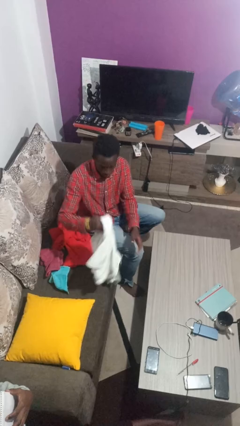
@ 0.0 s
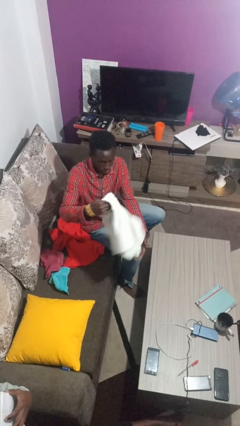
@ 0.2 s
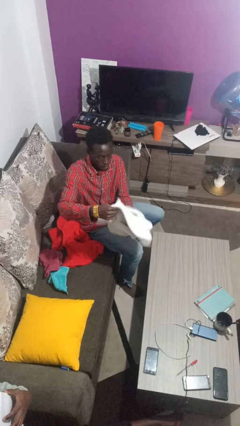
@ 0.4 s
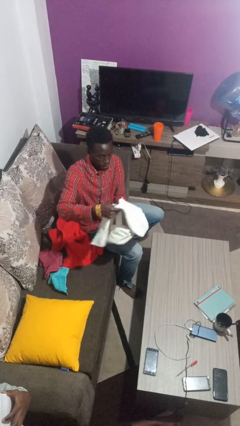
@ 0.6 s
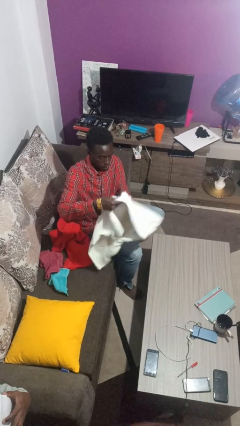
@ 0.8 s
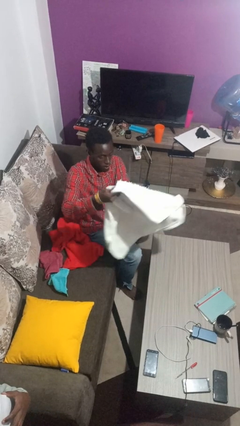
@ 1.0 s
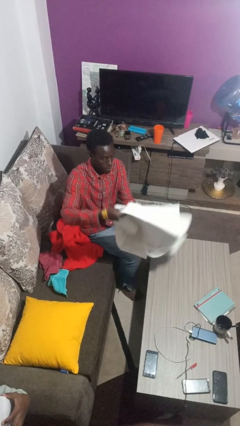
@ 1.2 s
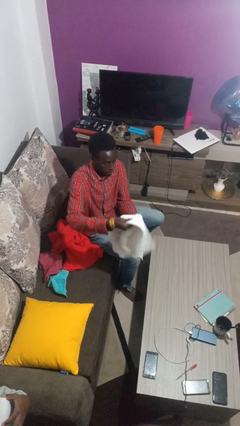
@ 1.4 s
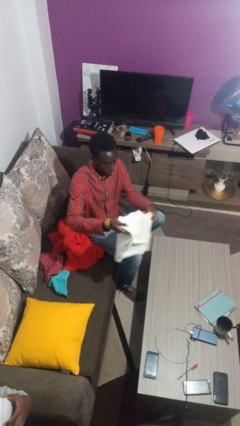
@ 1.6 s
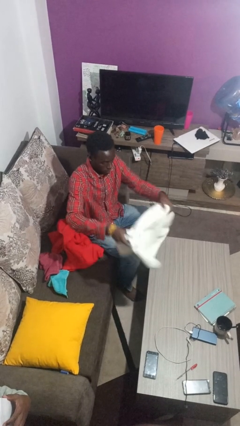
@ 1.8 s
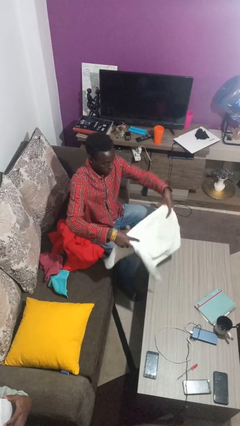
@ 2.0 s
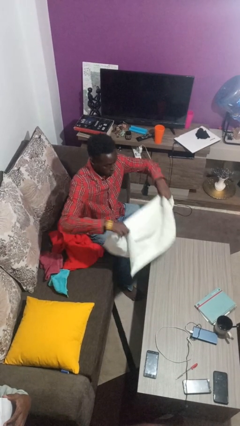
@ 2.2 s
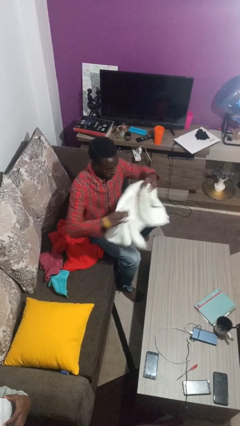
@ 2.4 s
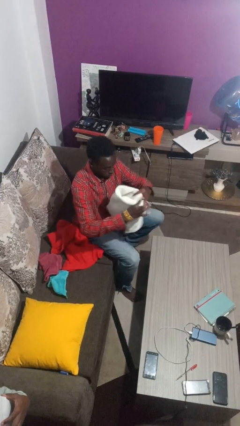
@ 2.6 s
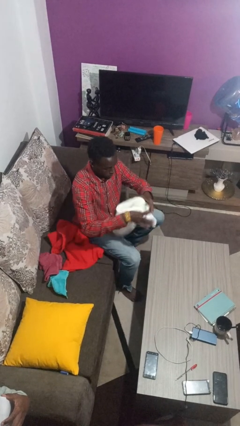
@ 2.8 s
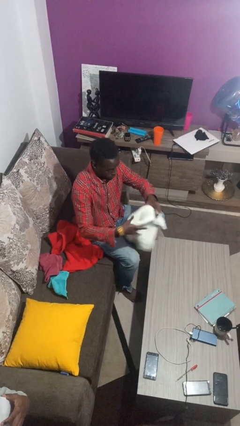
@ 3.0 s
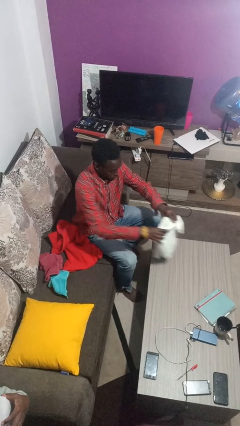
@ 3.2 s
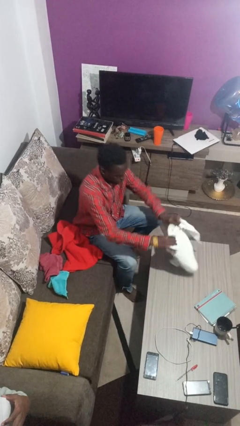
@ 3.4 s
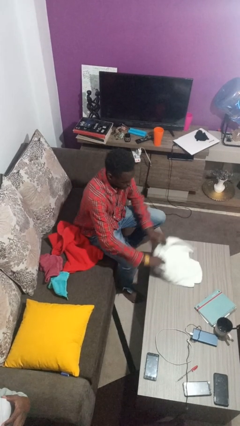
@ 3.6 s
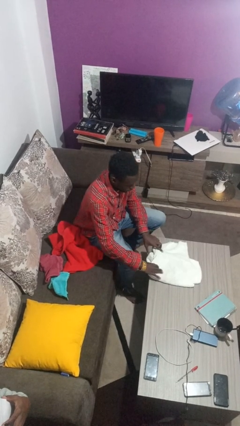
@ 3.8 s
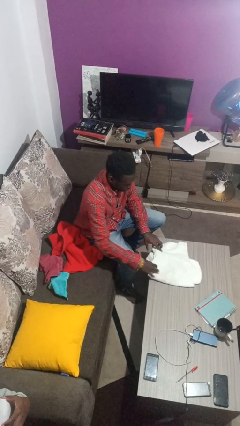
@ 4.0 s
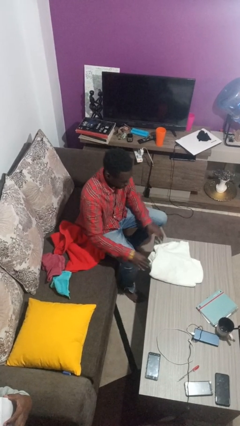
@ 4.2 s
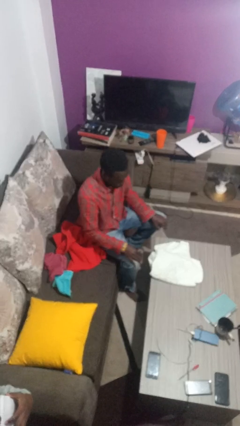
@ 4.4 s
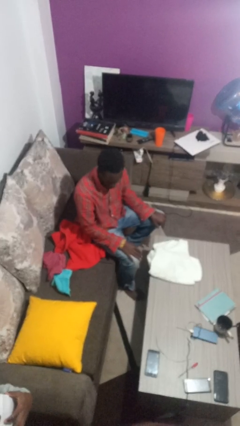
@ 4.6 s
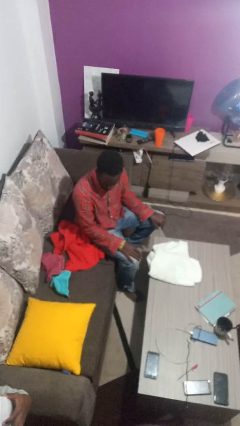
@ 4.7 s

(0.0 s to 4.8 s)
person folds towel

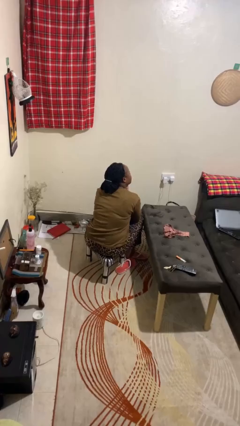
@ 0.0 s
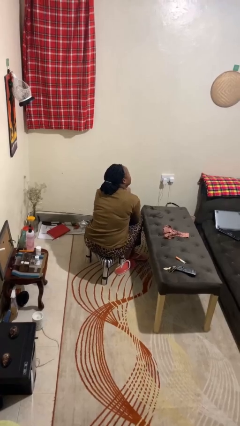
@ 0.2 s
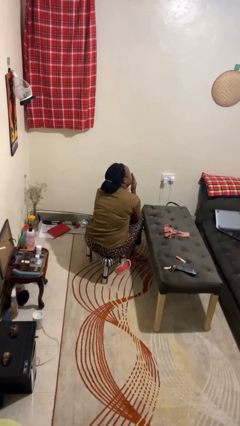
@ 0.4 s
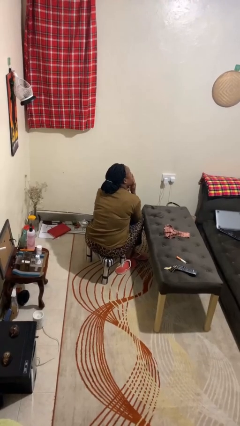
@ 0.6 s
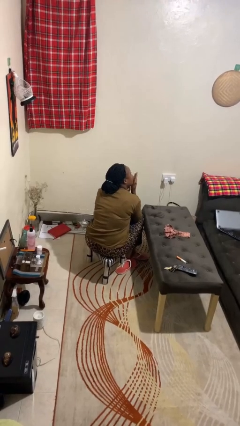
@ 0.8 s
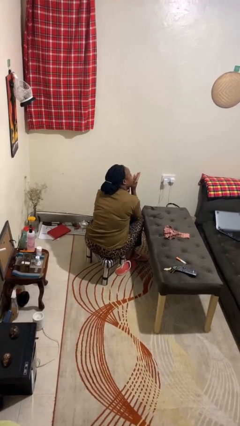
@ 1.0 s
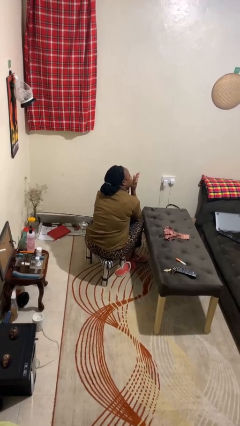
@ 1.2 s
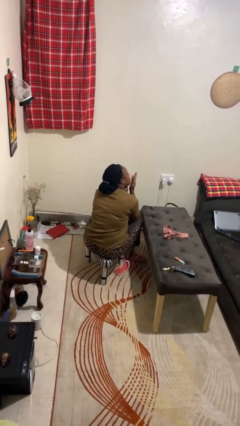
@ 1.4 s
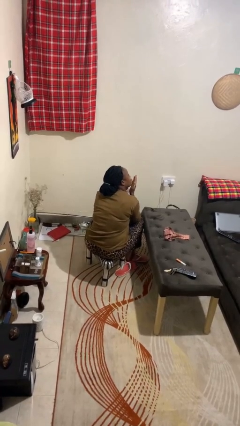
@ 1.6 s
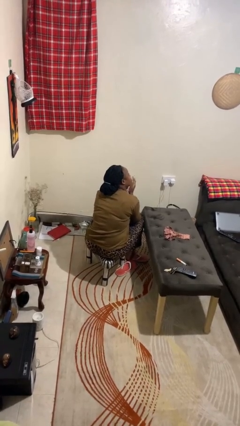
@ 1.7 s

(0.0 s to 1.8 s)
person gestures blow kiss

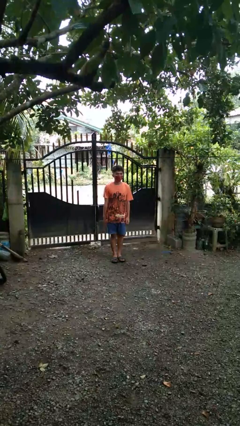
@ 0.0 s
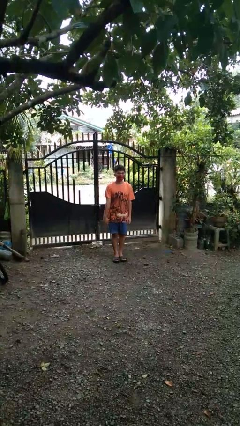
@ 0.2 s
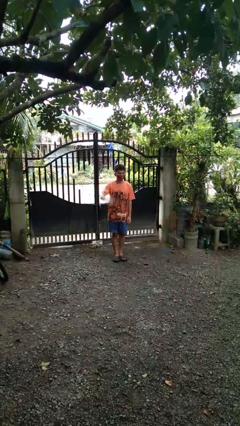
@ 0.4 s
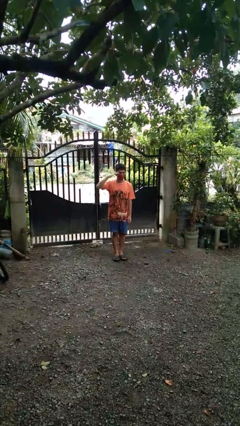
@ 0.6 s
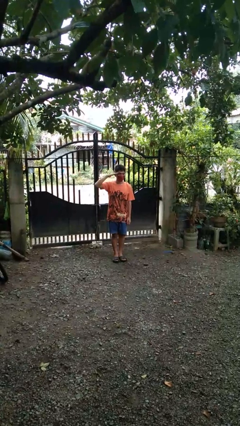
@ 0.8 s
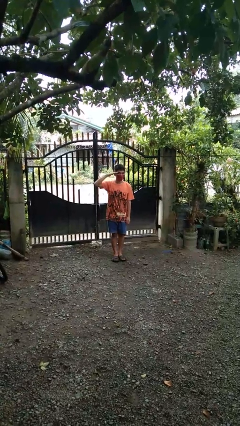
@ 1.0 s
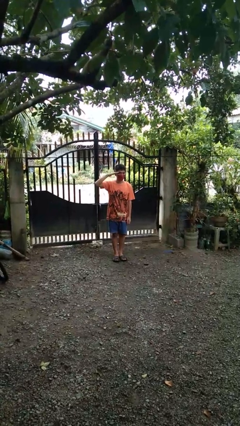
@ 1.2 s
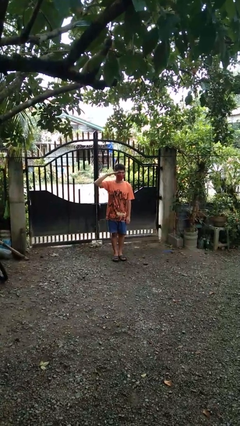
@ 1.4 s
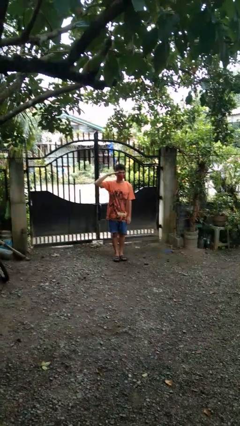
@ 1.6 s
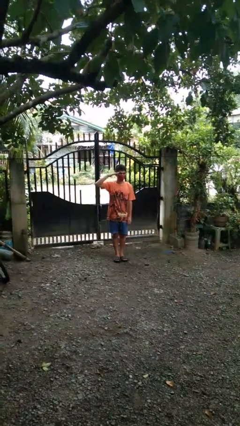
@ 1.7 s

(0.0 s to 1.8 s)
person salutes

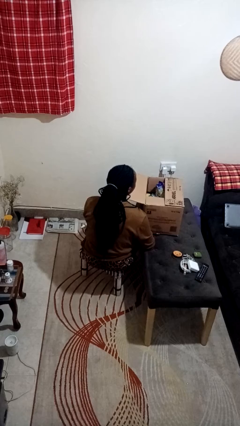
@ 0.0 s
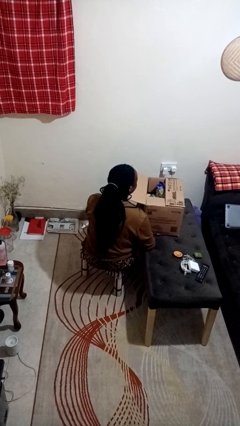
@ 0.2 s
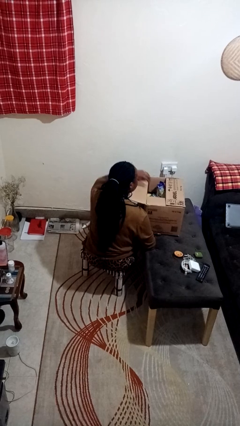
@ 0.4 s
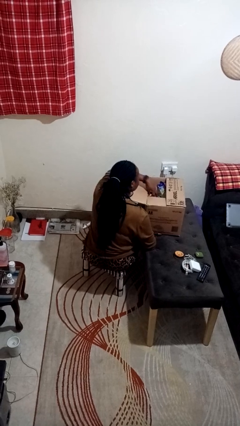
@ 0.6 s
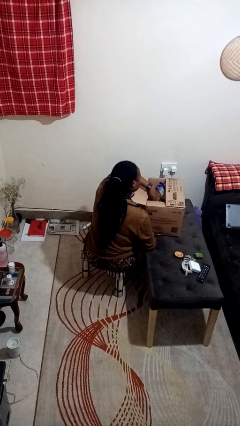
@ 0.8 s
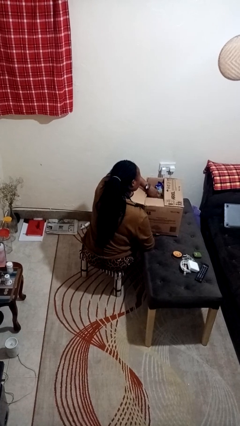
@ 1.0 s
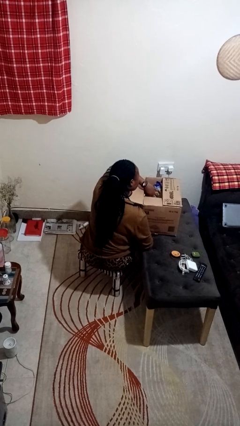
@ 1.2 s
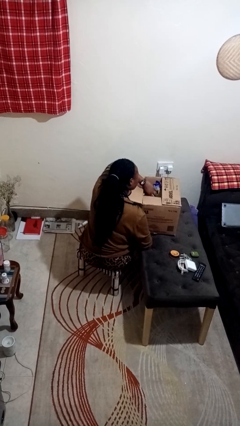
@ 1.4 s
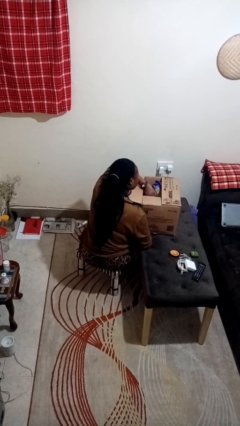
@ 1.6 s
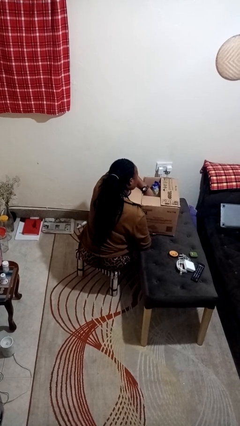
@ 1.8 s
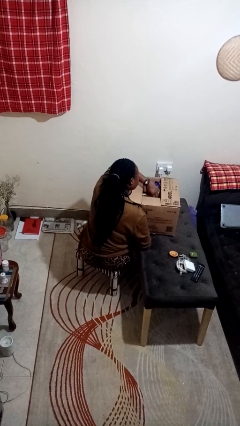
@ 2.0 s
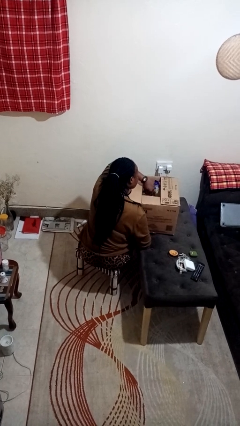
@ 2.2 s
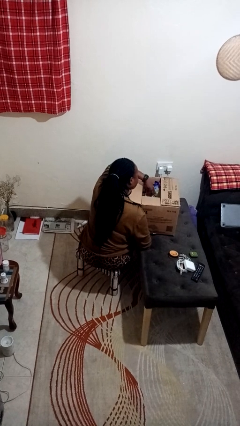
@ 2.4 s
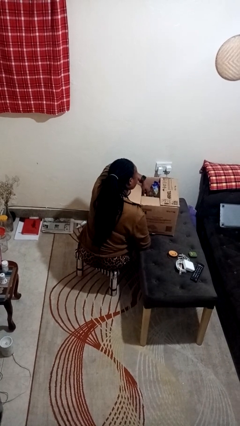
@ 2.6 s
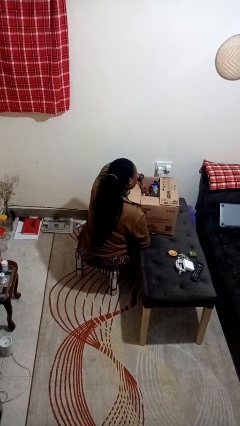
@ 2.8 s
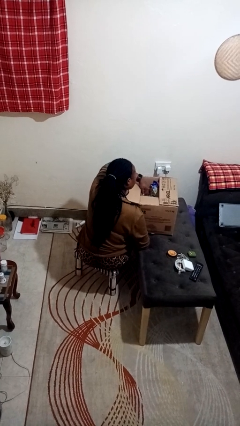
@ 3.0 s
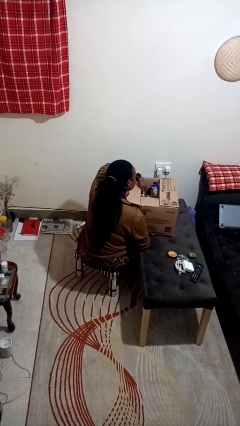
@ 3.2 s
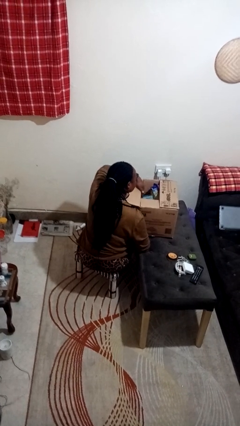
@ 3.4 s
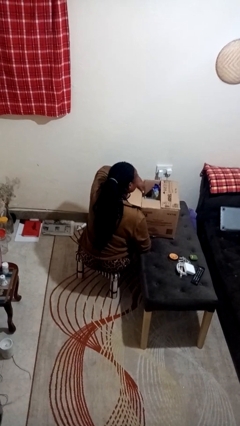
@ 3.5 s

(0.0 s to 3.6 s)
person searches in box

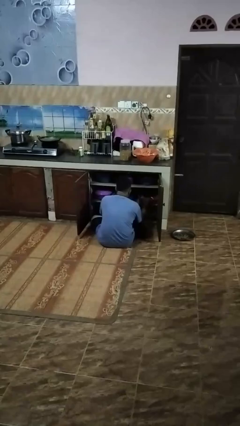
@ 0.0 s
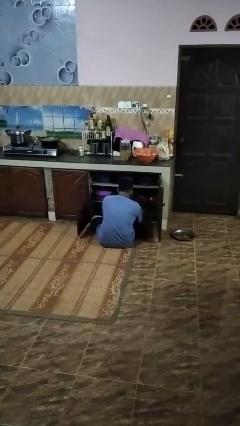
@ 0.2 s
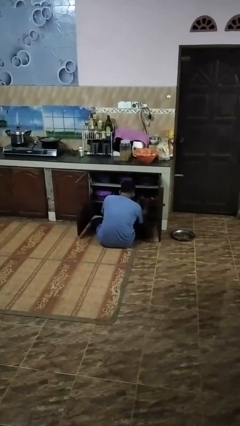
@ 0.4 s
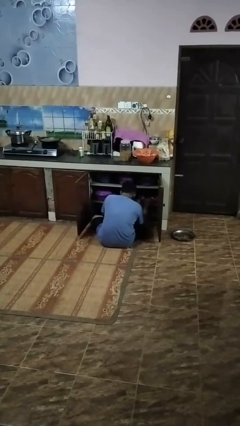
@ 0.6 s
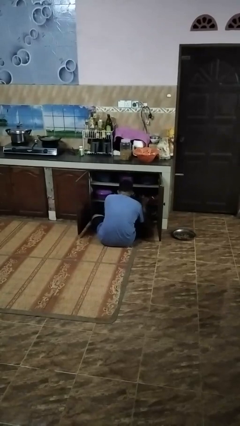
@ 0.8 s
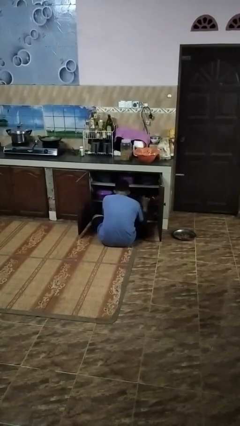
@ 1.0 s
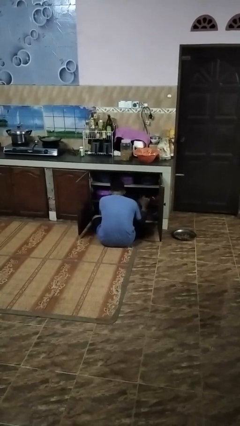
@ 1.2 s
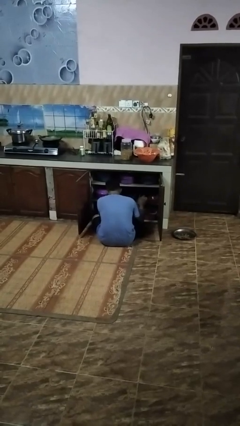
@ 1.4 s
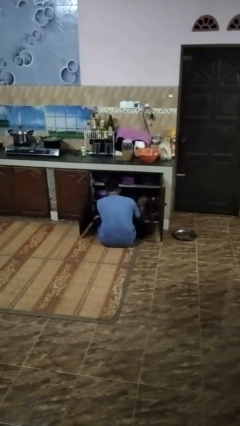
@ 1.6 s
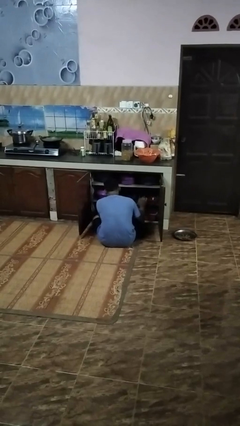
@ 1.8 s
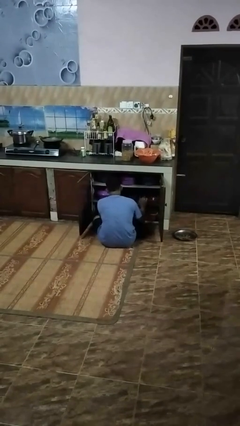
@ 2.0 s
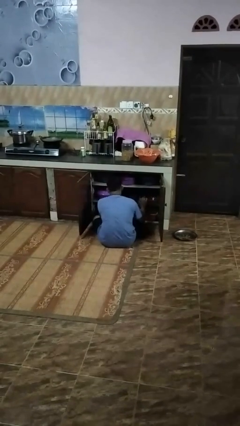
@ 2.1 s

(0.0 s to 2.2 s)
person searches in kitchen drawer

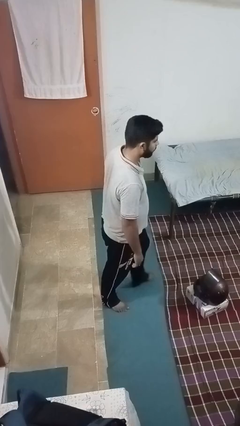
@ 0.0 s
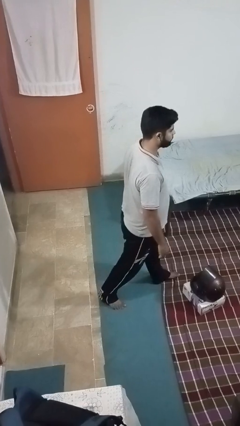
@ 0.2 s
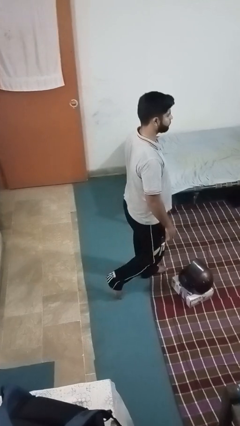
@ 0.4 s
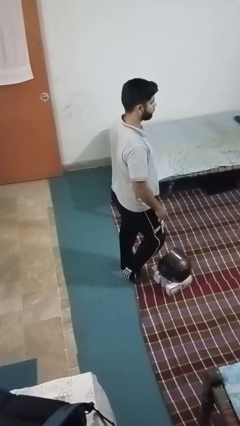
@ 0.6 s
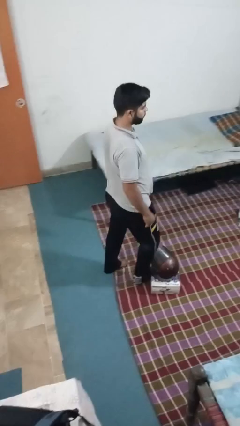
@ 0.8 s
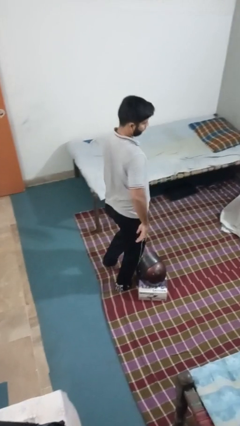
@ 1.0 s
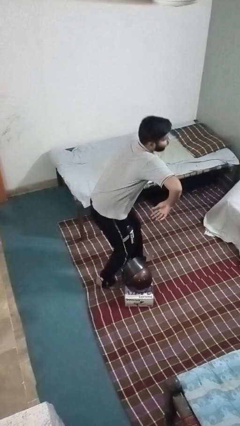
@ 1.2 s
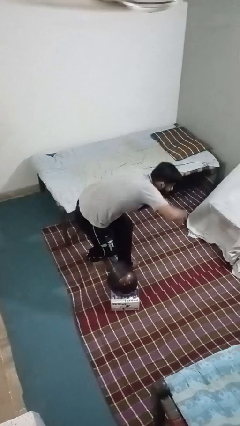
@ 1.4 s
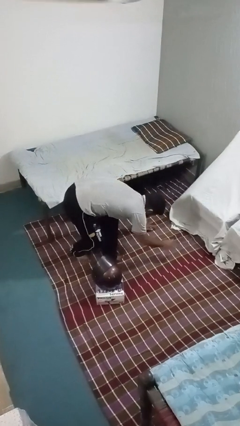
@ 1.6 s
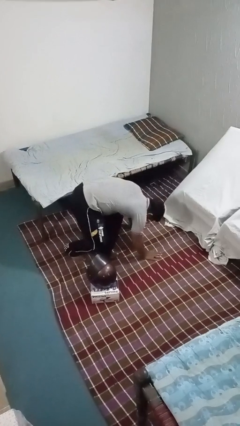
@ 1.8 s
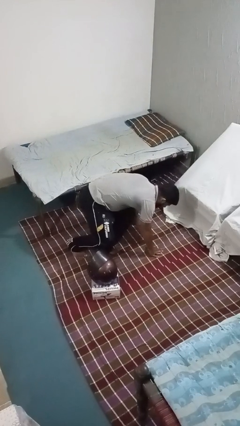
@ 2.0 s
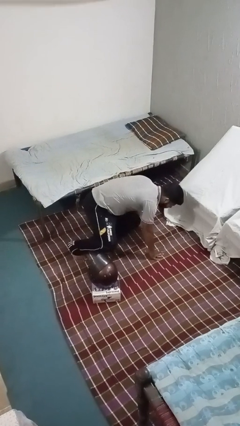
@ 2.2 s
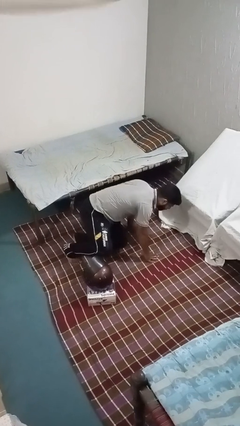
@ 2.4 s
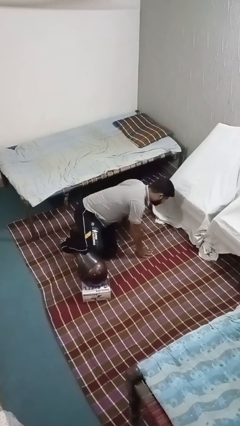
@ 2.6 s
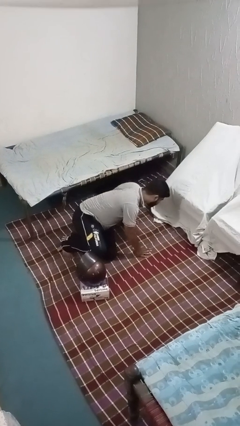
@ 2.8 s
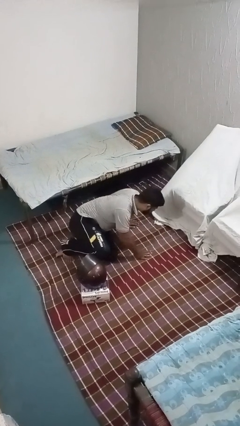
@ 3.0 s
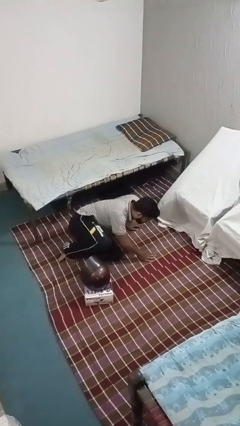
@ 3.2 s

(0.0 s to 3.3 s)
person trips on object on floor

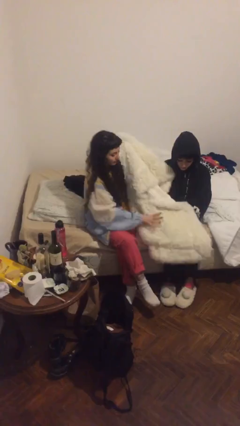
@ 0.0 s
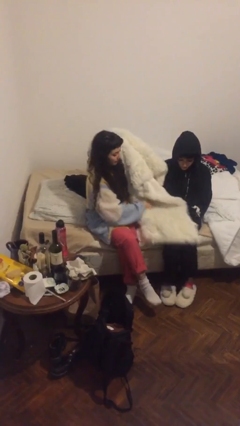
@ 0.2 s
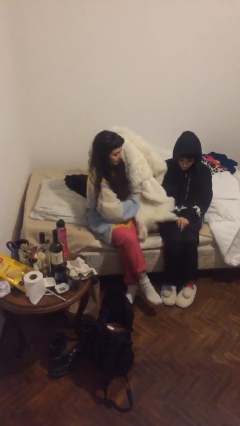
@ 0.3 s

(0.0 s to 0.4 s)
person uncovers friend with blanket
